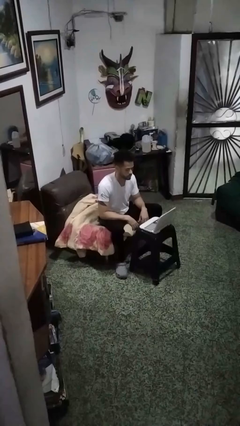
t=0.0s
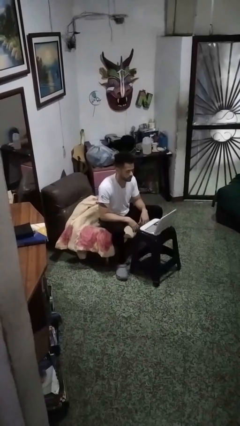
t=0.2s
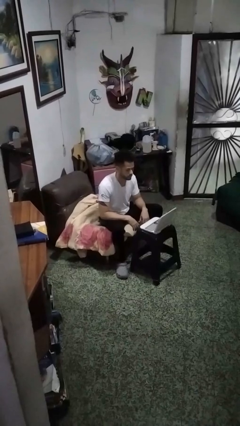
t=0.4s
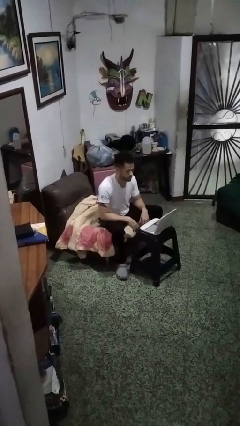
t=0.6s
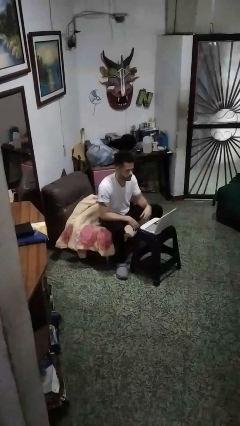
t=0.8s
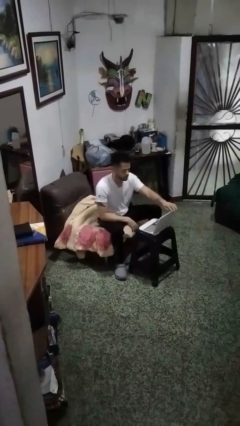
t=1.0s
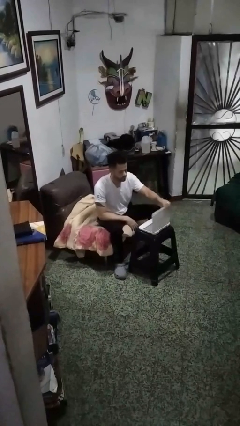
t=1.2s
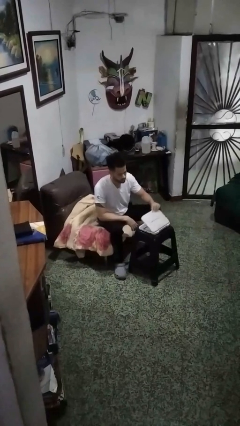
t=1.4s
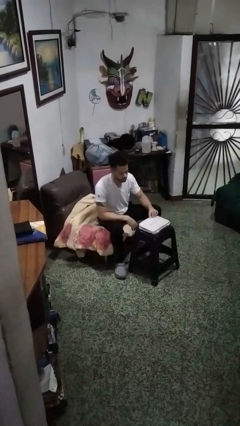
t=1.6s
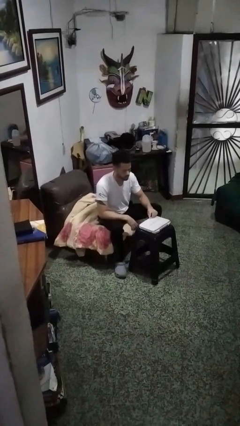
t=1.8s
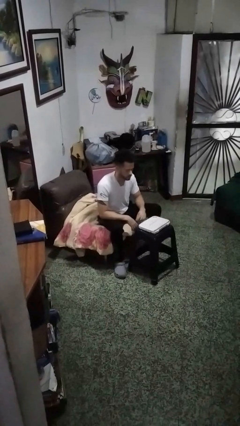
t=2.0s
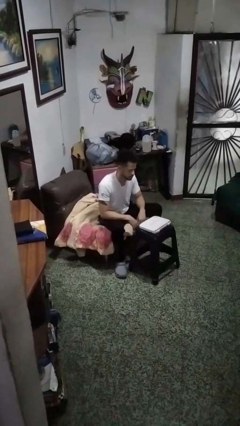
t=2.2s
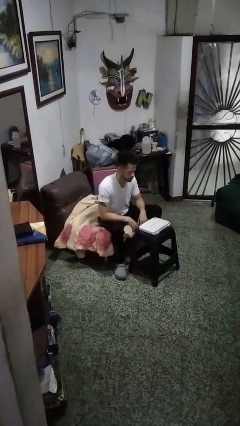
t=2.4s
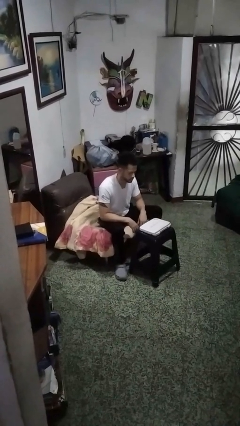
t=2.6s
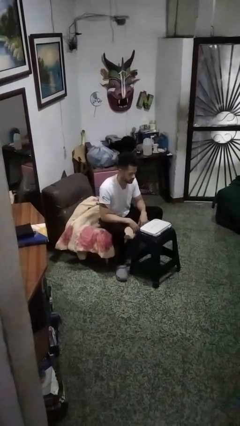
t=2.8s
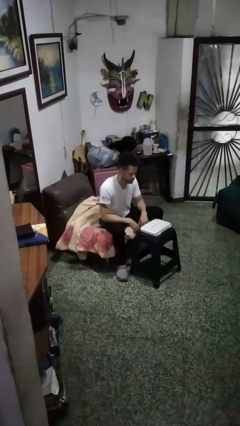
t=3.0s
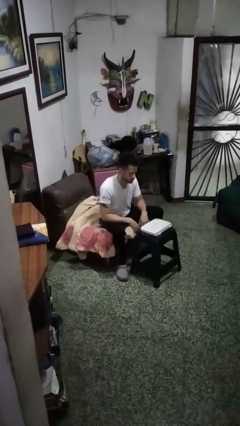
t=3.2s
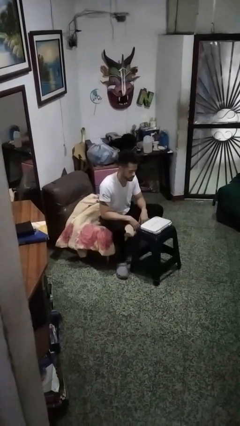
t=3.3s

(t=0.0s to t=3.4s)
person closes laptop

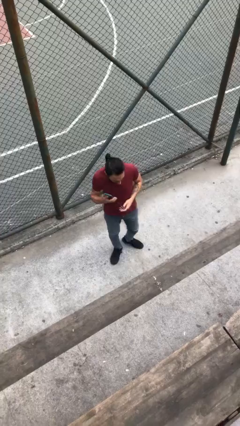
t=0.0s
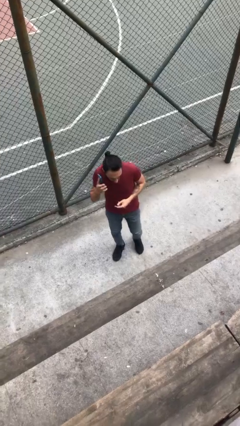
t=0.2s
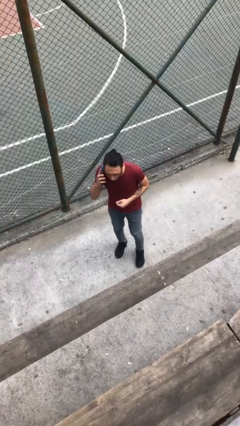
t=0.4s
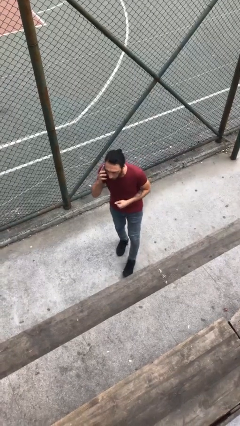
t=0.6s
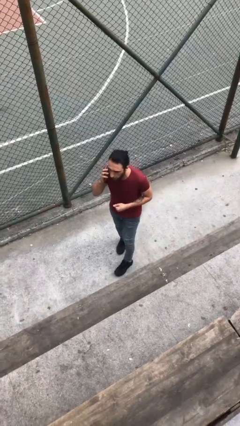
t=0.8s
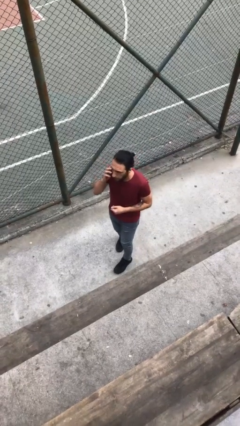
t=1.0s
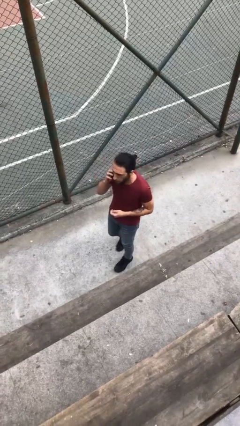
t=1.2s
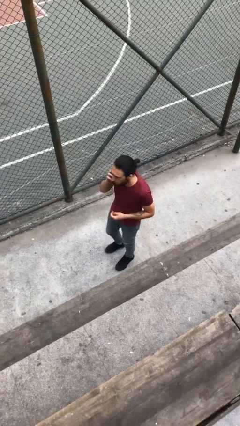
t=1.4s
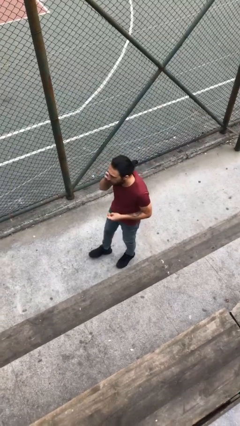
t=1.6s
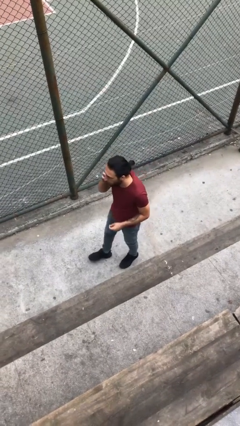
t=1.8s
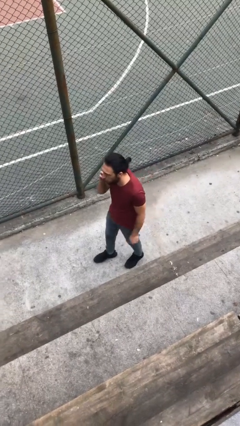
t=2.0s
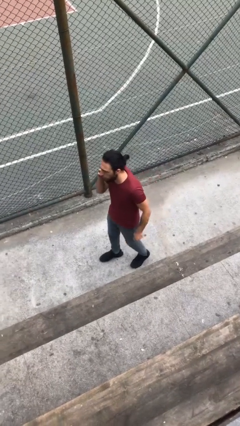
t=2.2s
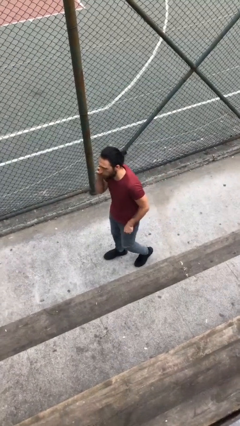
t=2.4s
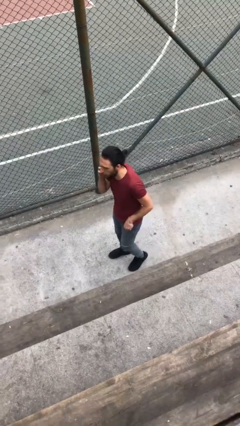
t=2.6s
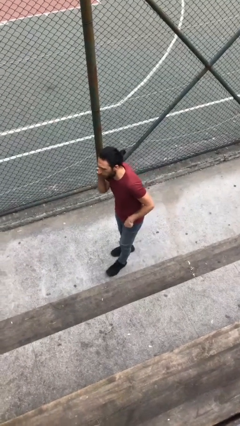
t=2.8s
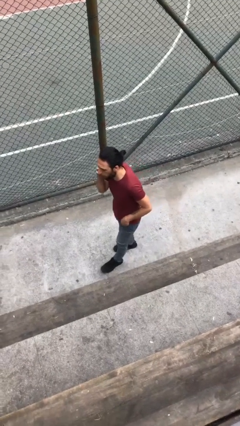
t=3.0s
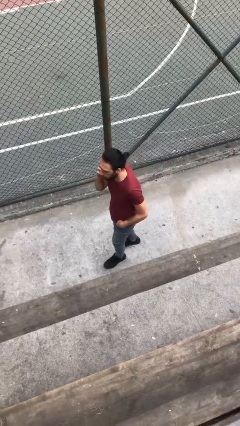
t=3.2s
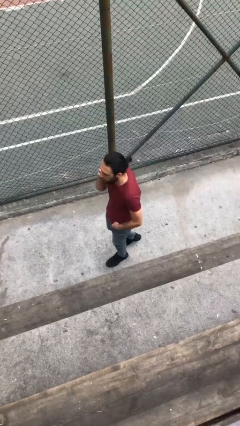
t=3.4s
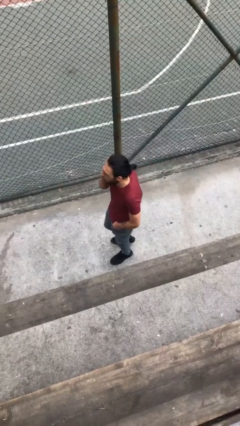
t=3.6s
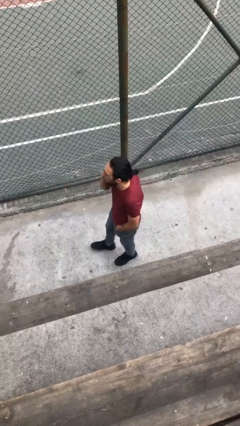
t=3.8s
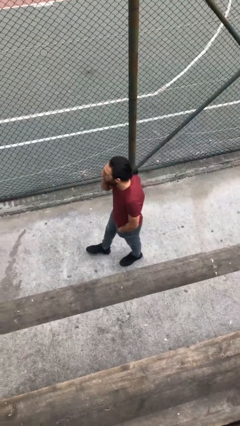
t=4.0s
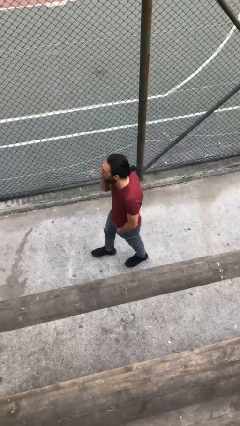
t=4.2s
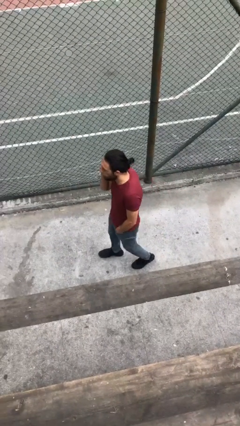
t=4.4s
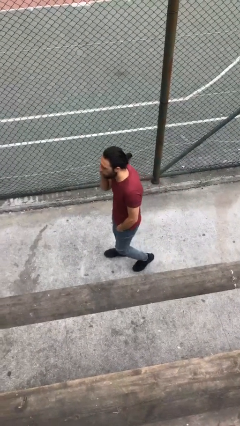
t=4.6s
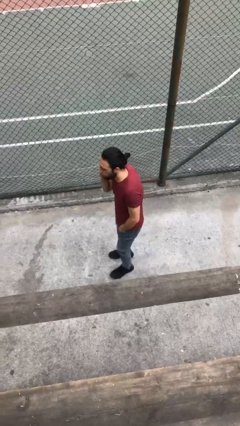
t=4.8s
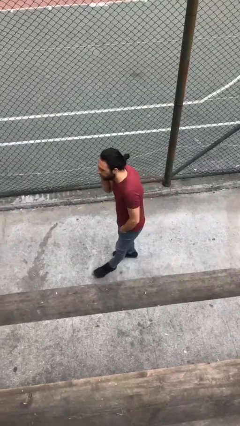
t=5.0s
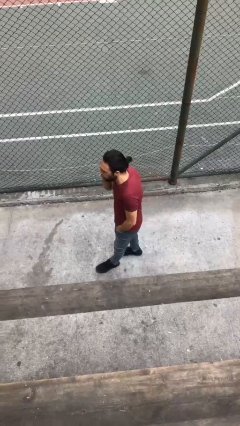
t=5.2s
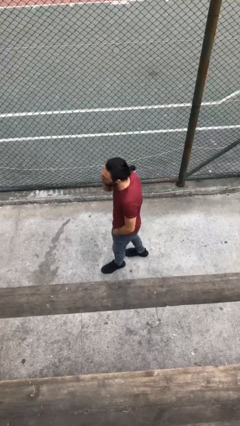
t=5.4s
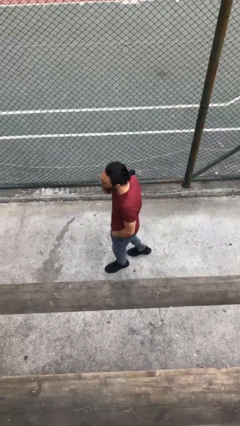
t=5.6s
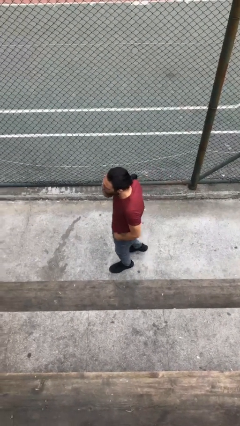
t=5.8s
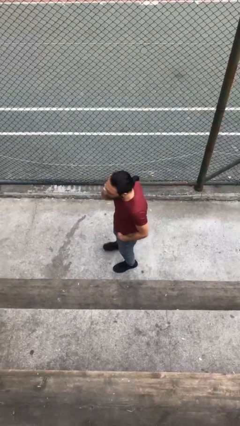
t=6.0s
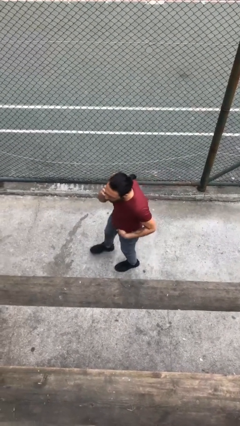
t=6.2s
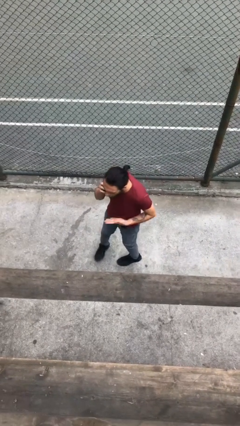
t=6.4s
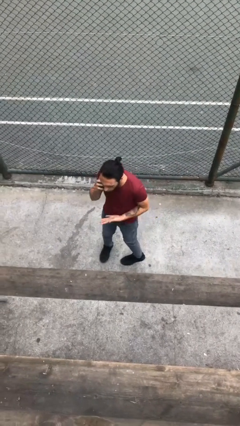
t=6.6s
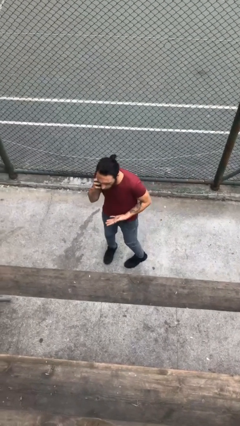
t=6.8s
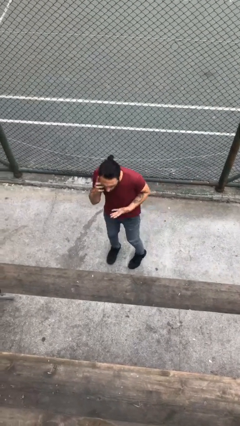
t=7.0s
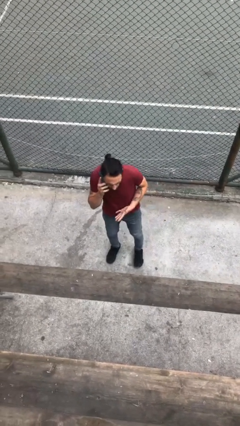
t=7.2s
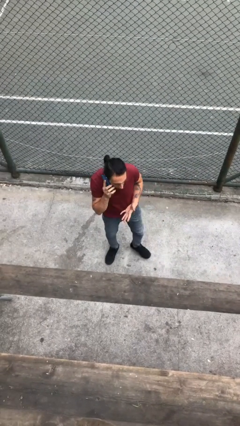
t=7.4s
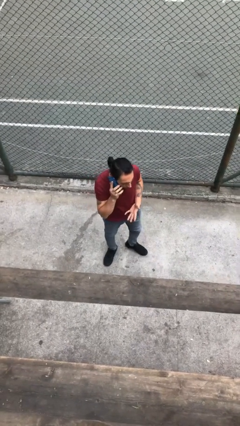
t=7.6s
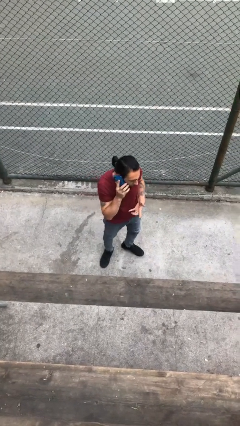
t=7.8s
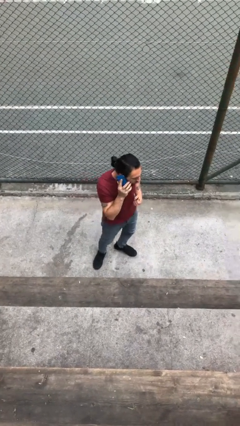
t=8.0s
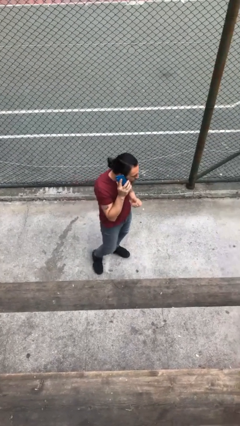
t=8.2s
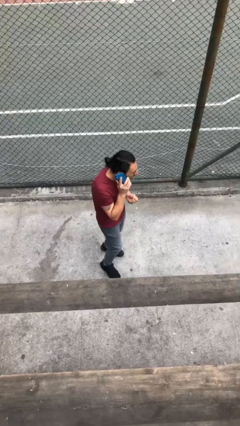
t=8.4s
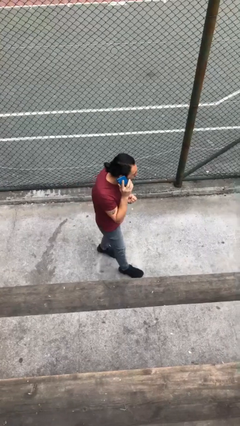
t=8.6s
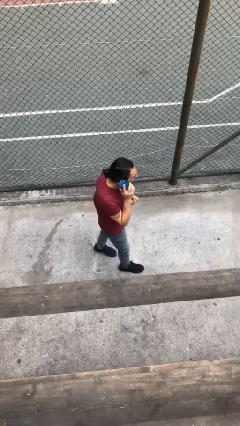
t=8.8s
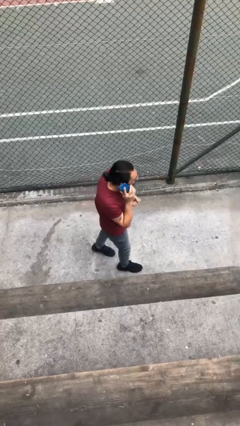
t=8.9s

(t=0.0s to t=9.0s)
person talks on phone

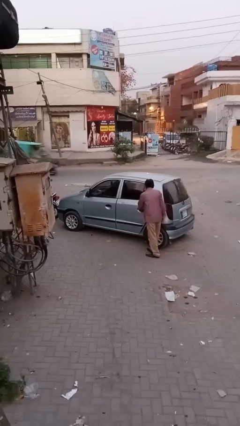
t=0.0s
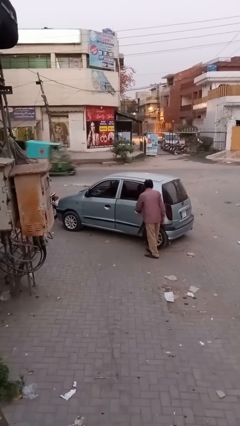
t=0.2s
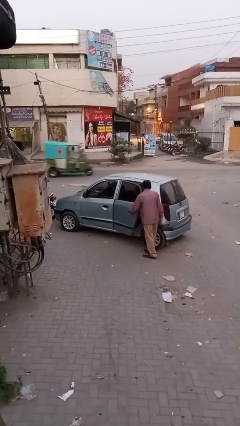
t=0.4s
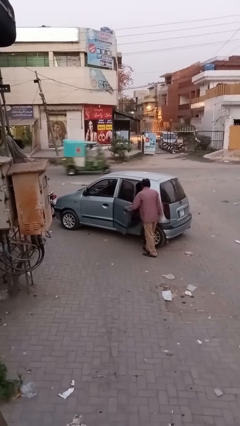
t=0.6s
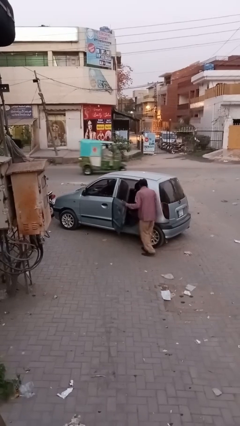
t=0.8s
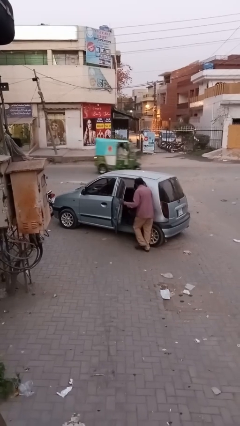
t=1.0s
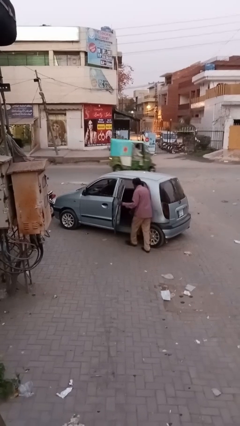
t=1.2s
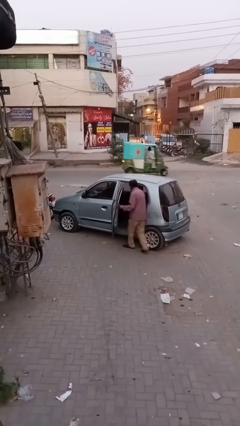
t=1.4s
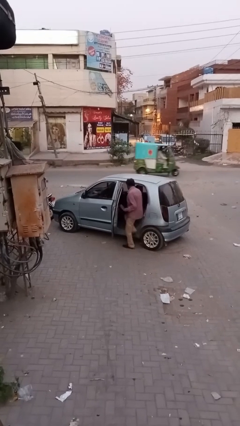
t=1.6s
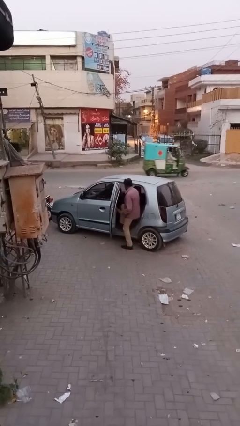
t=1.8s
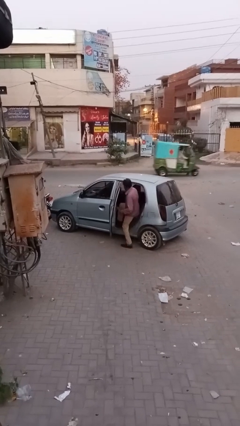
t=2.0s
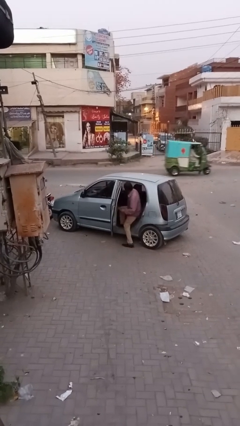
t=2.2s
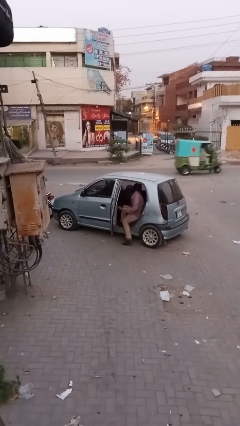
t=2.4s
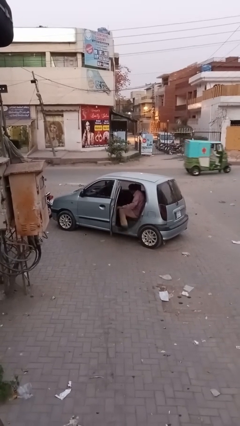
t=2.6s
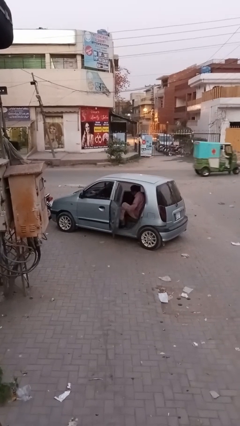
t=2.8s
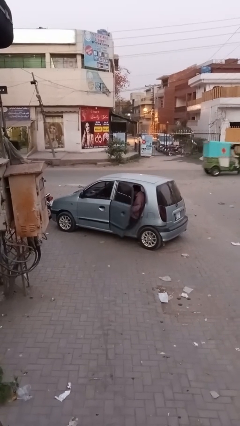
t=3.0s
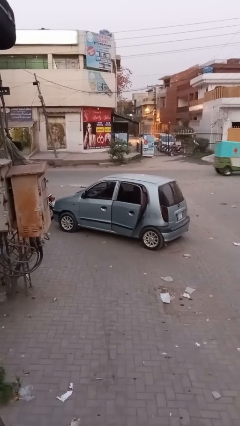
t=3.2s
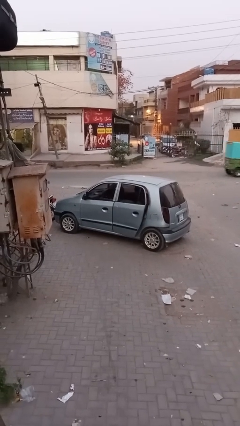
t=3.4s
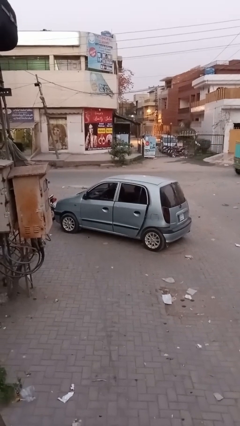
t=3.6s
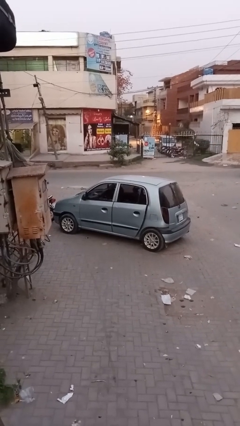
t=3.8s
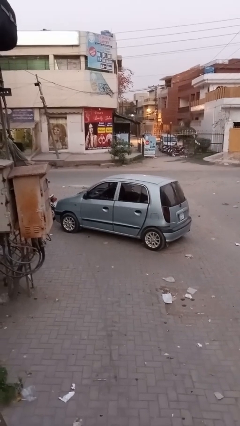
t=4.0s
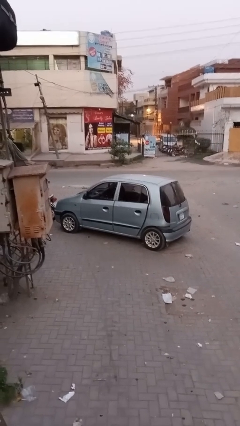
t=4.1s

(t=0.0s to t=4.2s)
car picks up person

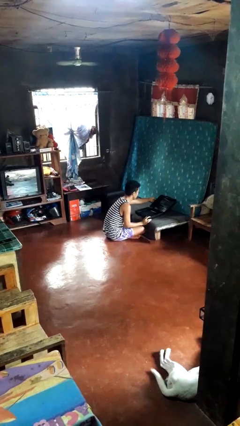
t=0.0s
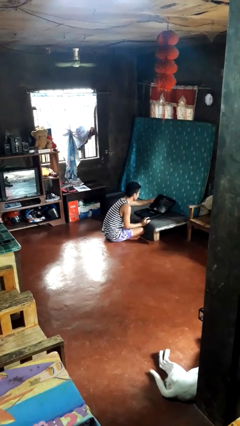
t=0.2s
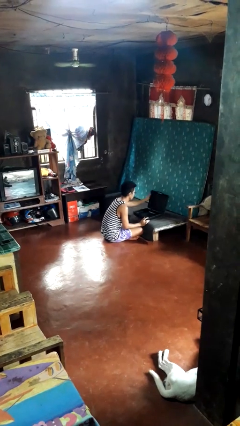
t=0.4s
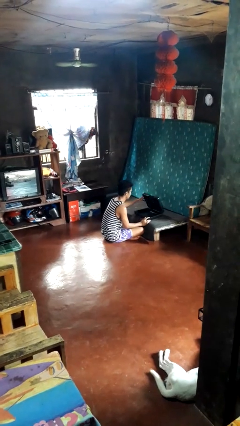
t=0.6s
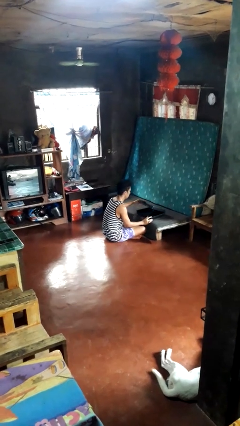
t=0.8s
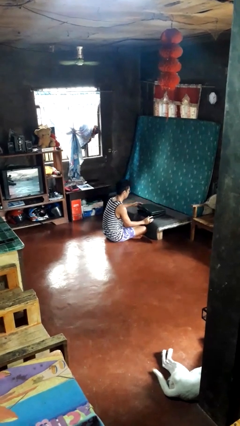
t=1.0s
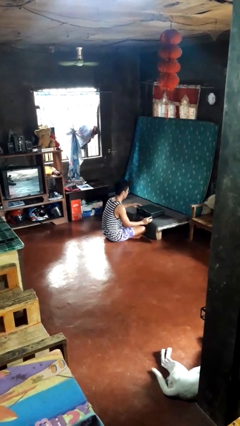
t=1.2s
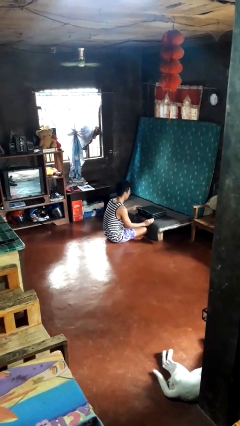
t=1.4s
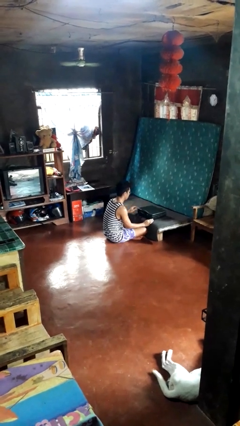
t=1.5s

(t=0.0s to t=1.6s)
person closes suitcase
